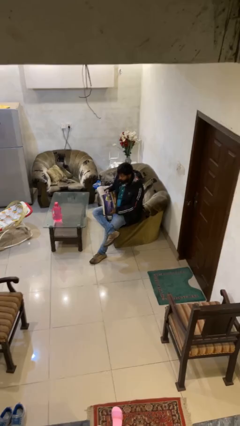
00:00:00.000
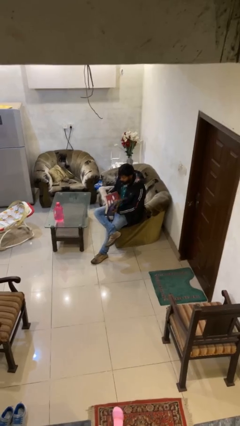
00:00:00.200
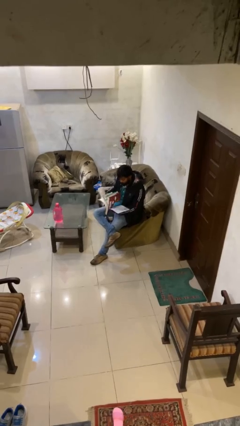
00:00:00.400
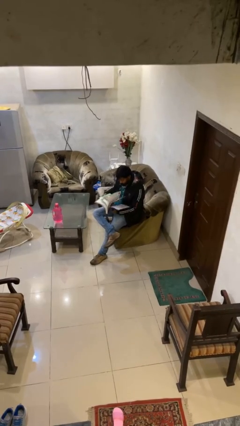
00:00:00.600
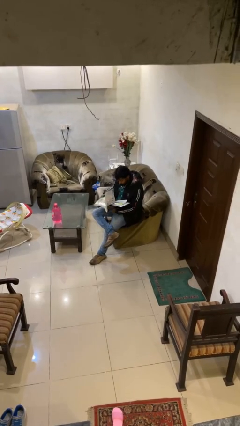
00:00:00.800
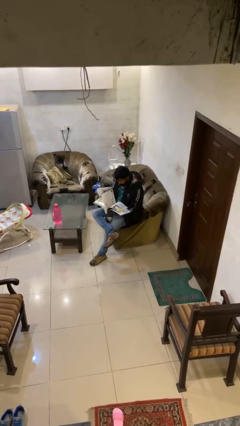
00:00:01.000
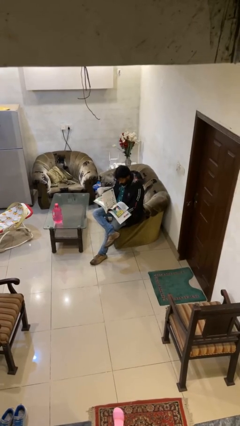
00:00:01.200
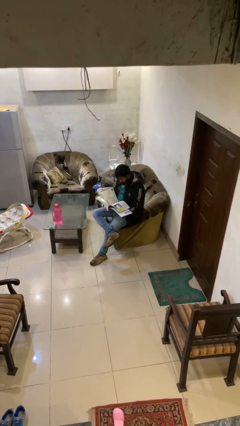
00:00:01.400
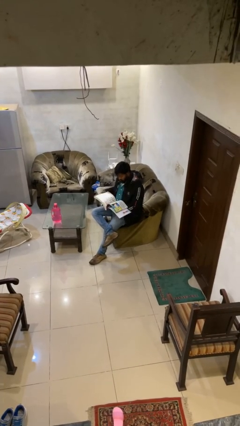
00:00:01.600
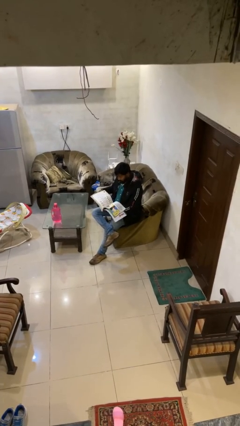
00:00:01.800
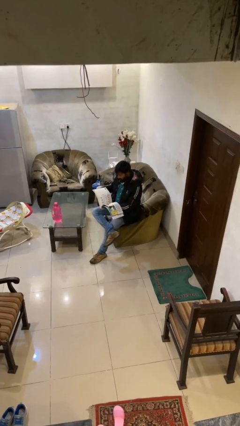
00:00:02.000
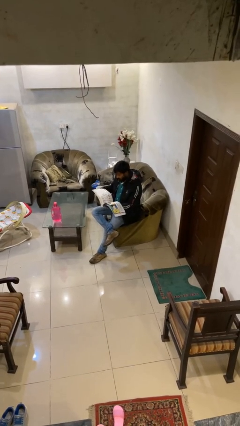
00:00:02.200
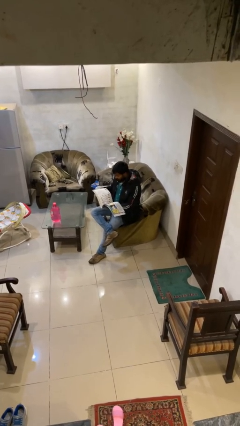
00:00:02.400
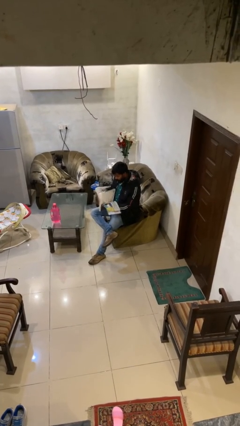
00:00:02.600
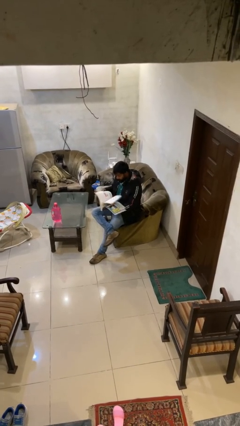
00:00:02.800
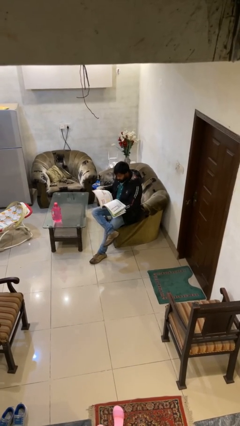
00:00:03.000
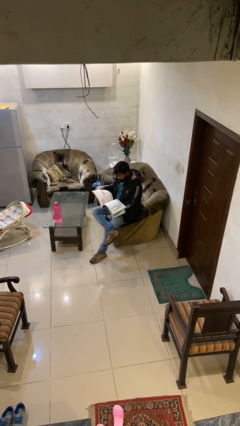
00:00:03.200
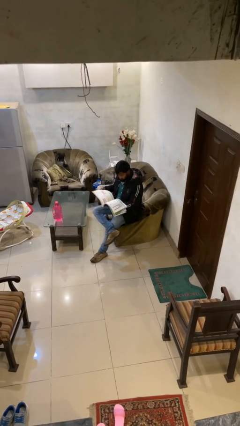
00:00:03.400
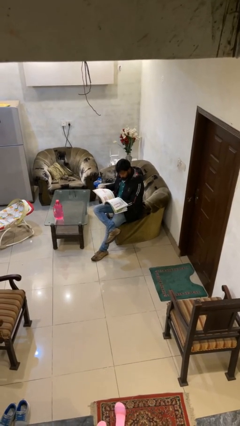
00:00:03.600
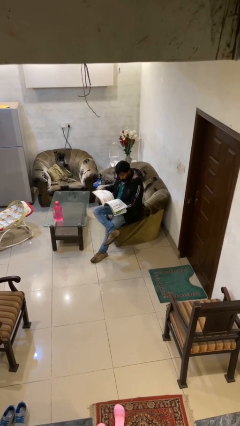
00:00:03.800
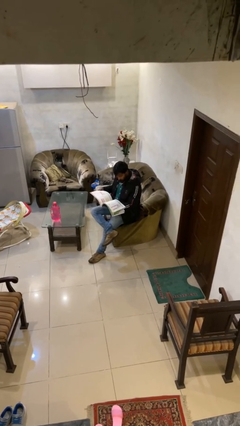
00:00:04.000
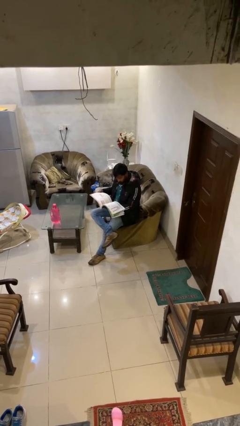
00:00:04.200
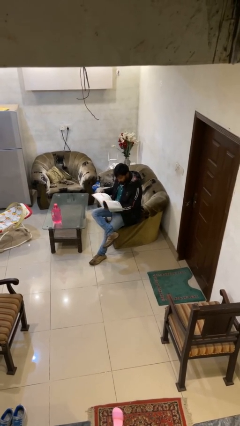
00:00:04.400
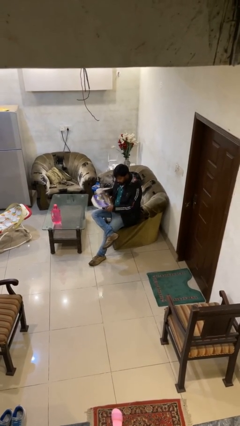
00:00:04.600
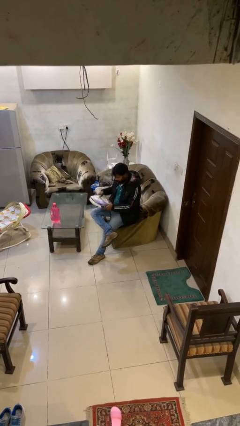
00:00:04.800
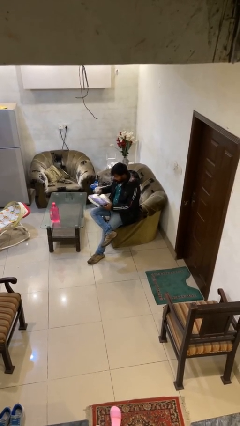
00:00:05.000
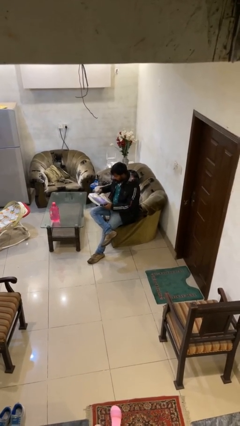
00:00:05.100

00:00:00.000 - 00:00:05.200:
person reads document

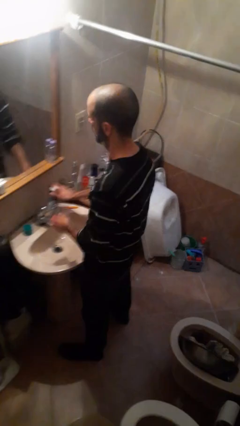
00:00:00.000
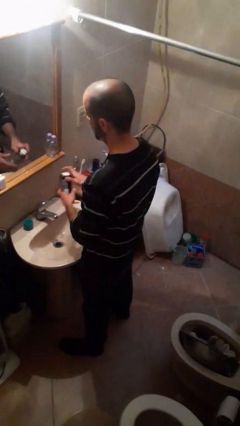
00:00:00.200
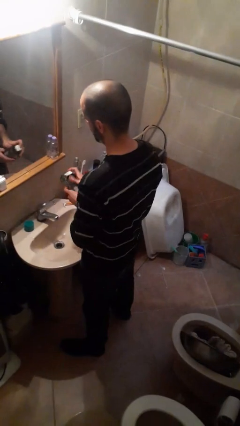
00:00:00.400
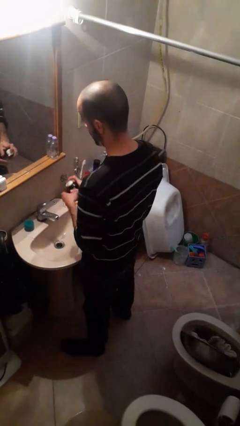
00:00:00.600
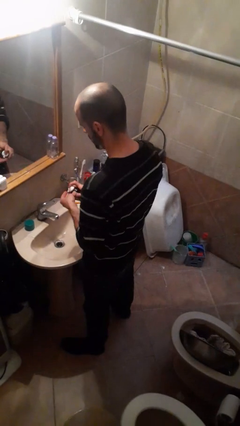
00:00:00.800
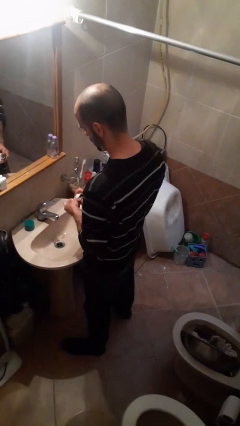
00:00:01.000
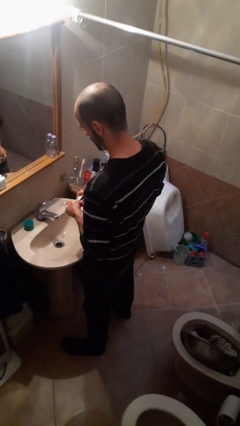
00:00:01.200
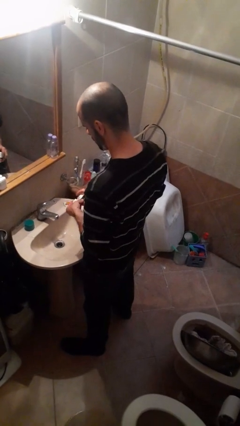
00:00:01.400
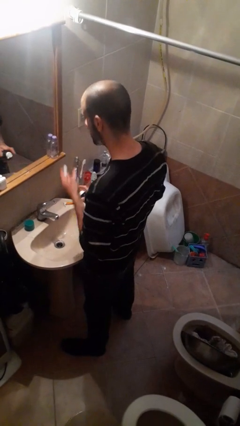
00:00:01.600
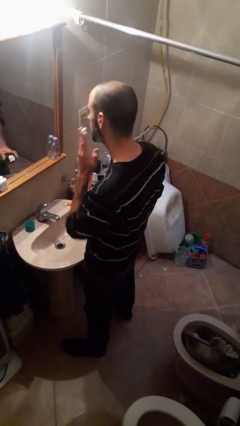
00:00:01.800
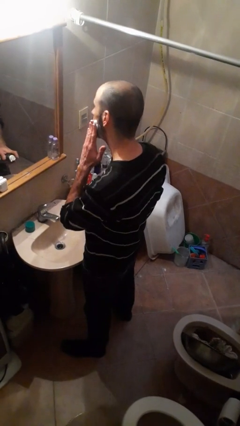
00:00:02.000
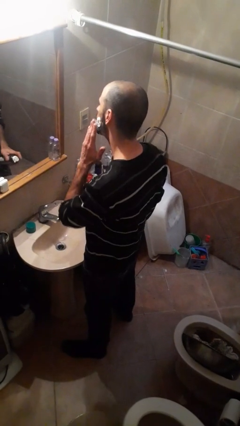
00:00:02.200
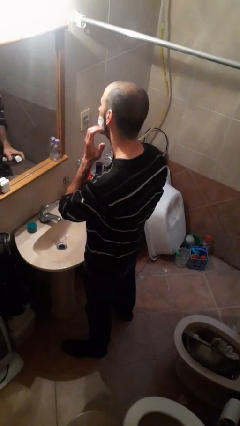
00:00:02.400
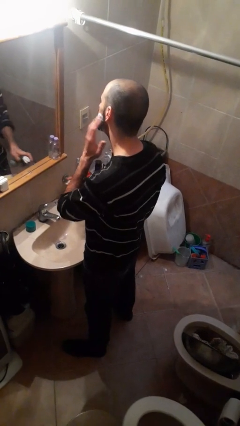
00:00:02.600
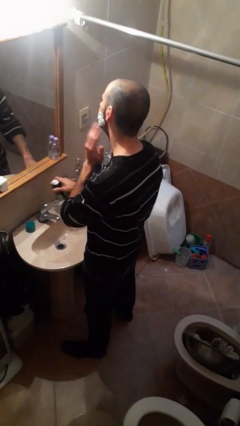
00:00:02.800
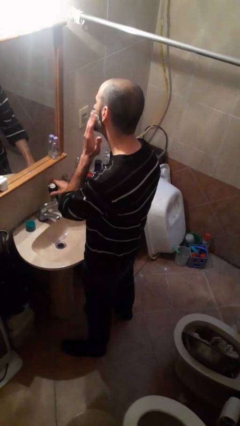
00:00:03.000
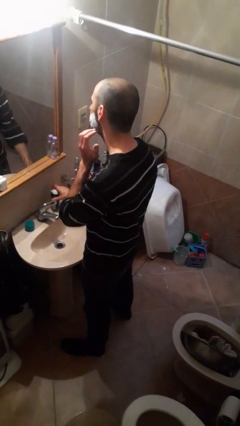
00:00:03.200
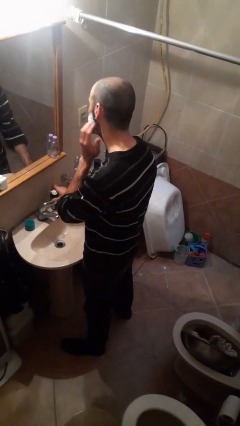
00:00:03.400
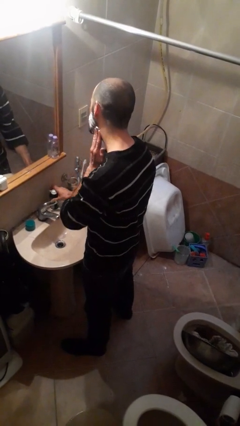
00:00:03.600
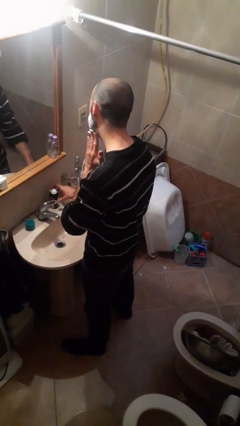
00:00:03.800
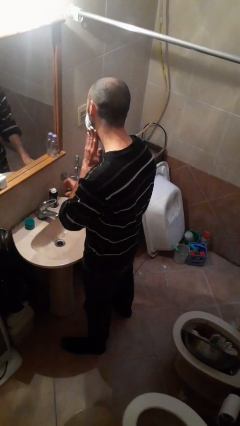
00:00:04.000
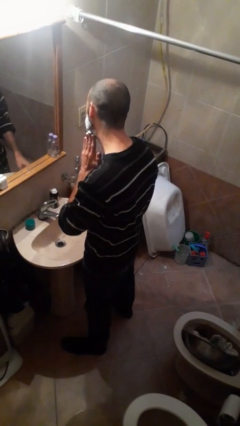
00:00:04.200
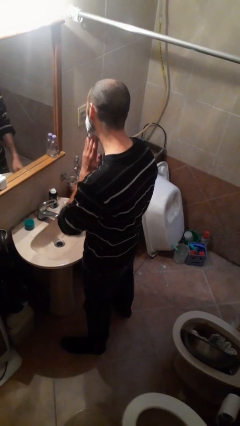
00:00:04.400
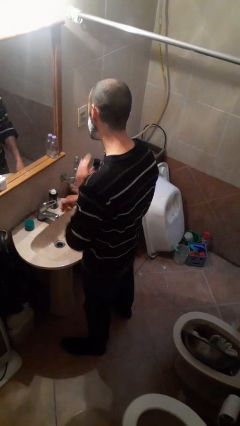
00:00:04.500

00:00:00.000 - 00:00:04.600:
person applies shaving cream

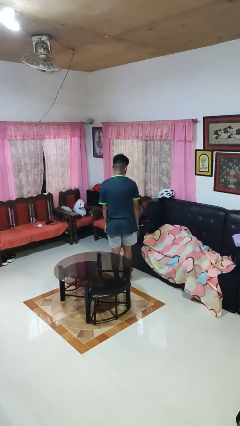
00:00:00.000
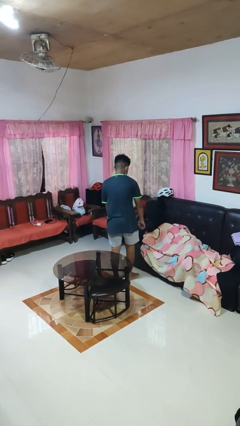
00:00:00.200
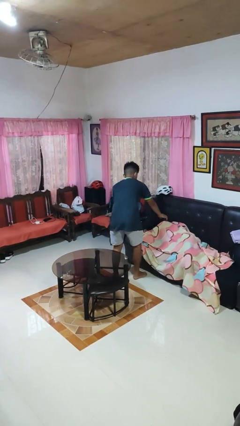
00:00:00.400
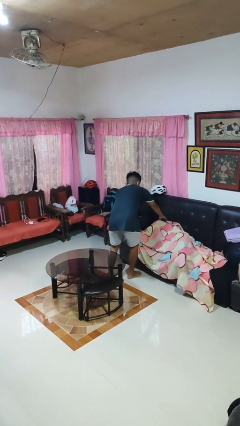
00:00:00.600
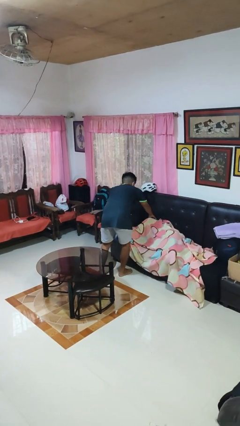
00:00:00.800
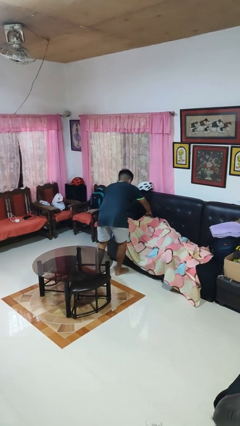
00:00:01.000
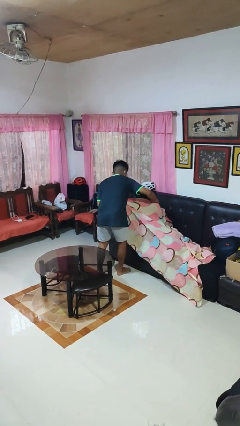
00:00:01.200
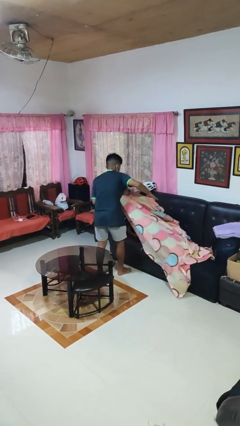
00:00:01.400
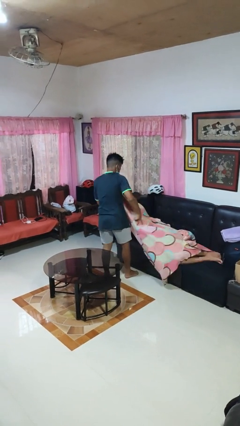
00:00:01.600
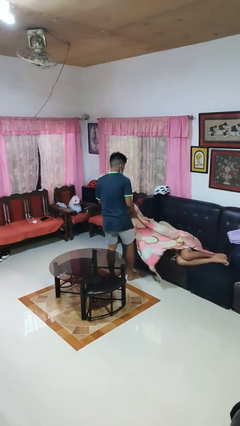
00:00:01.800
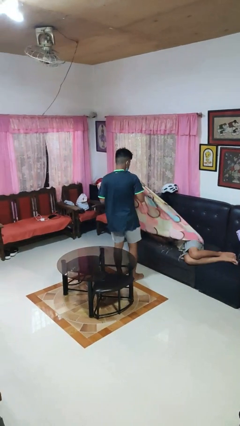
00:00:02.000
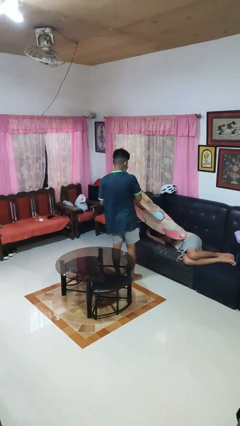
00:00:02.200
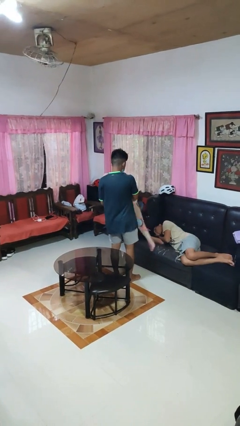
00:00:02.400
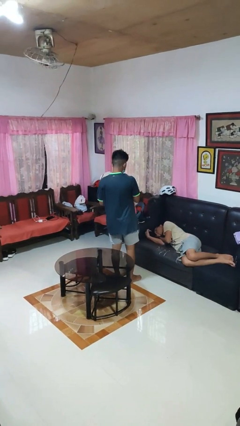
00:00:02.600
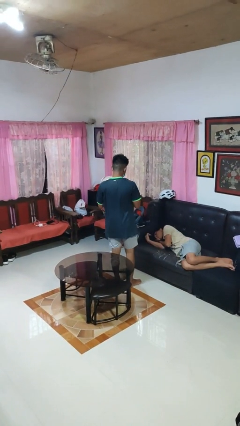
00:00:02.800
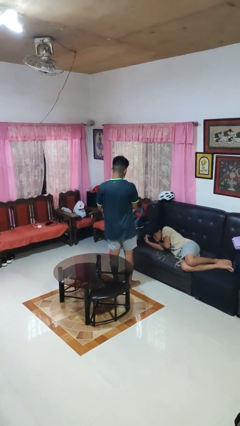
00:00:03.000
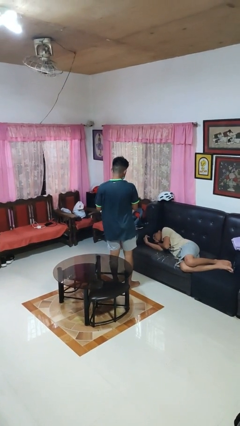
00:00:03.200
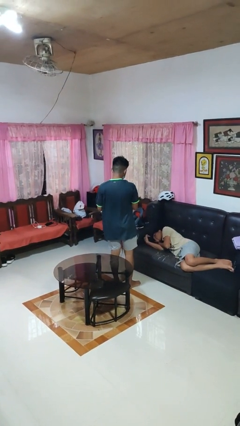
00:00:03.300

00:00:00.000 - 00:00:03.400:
person uncovers friend with blanket

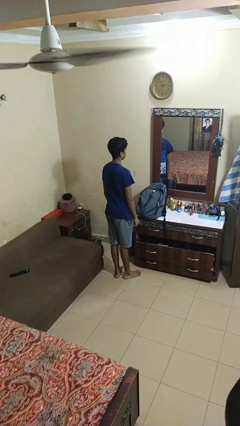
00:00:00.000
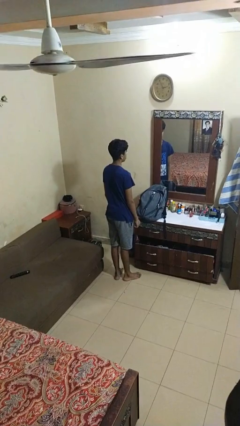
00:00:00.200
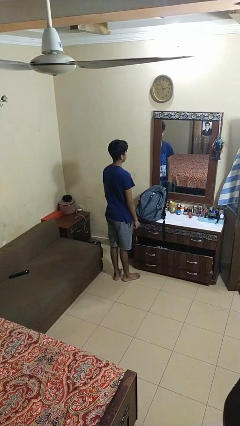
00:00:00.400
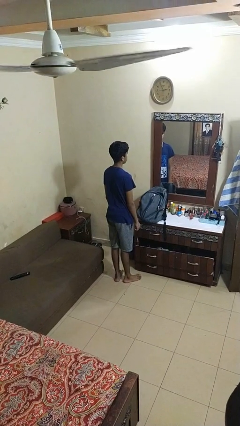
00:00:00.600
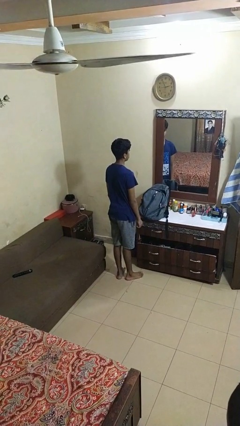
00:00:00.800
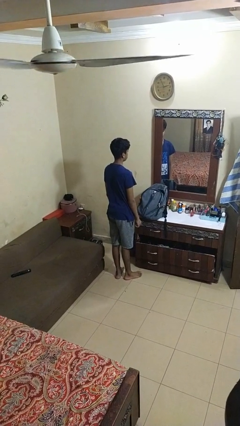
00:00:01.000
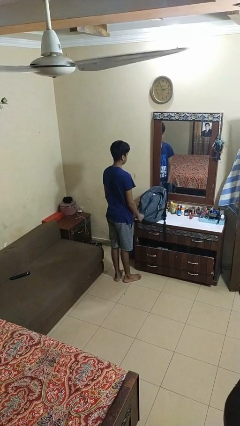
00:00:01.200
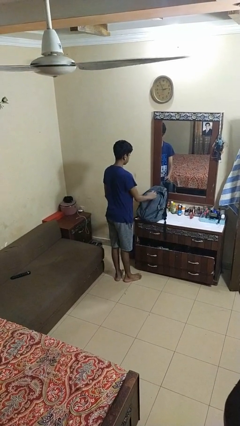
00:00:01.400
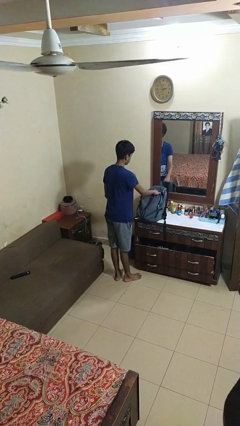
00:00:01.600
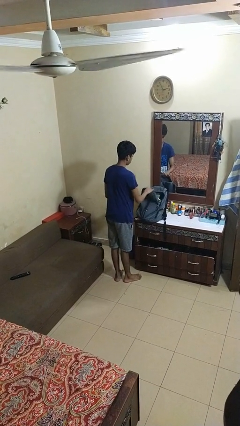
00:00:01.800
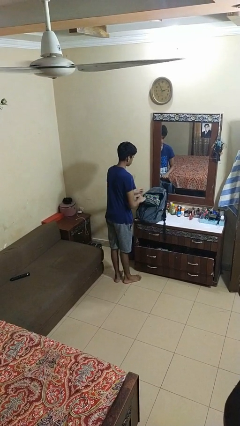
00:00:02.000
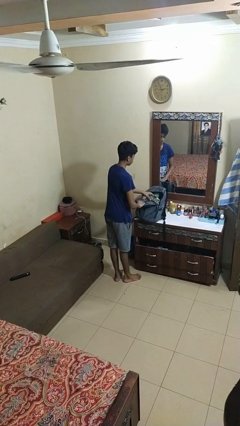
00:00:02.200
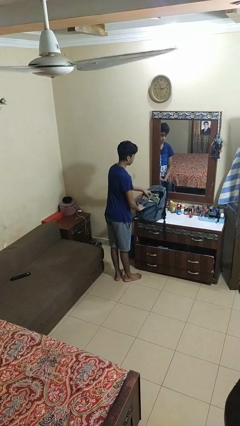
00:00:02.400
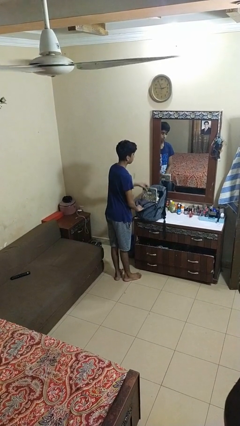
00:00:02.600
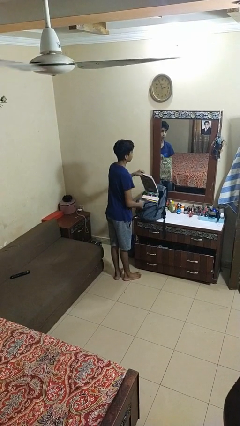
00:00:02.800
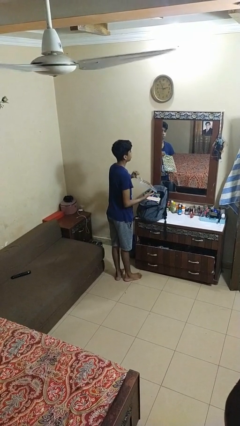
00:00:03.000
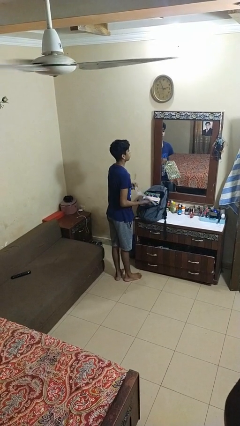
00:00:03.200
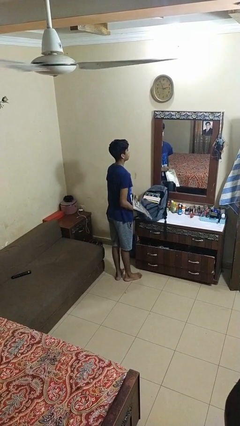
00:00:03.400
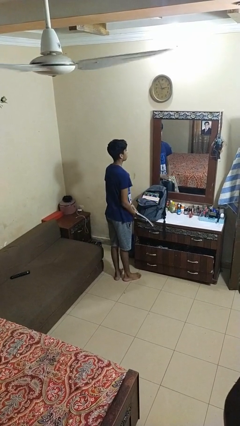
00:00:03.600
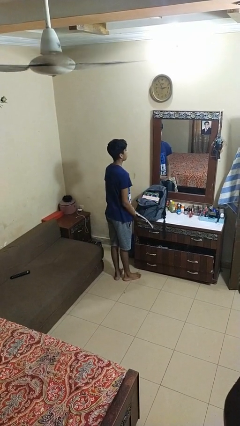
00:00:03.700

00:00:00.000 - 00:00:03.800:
person takes object from bag

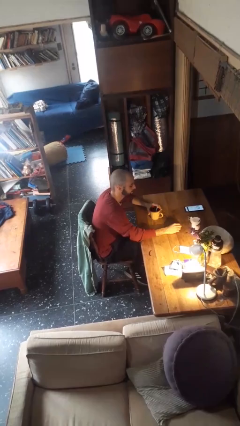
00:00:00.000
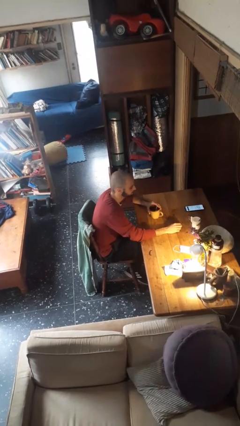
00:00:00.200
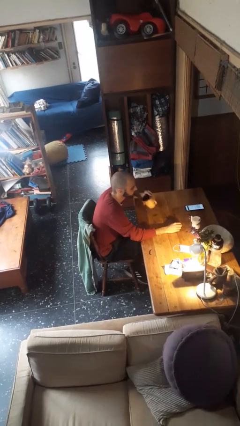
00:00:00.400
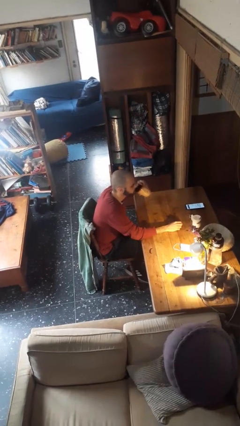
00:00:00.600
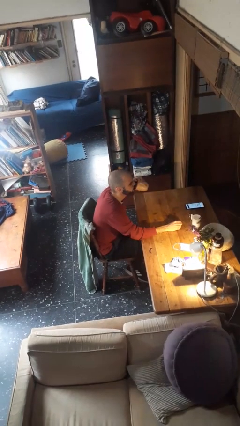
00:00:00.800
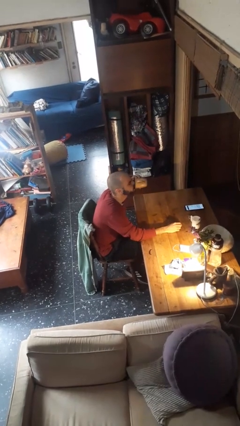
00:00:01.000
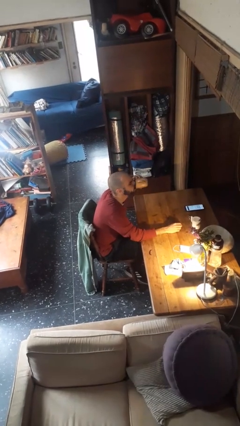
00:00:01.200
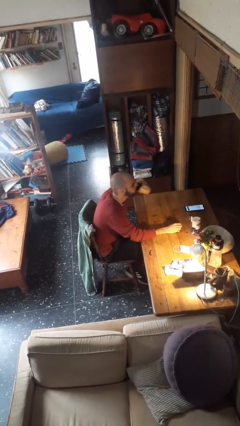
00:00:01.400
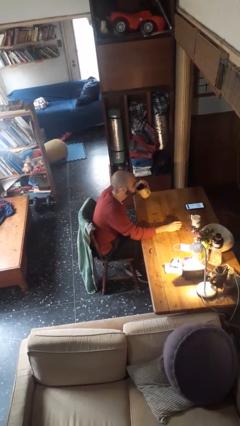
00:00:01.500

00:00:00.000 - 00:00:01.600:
person drinks from mug
